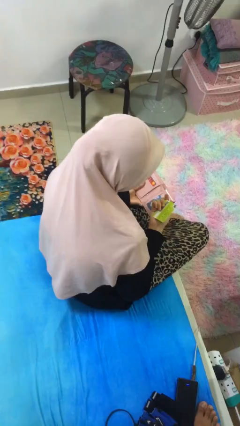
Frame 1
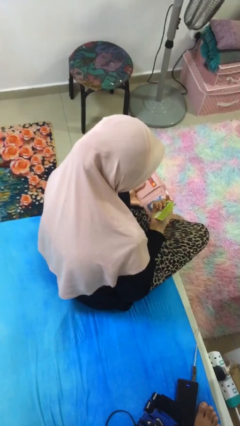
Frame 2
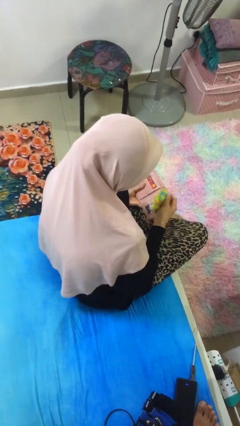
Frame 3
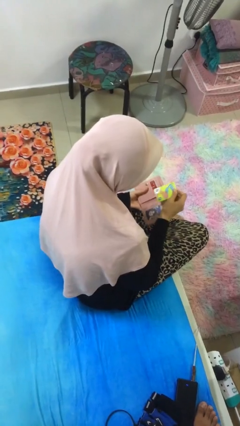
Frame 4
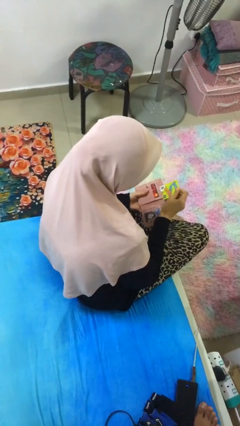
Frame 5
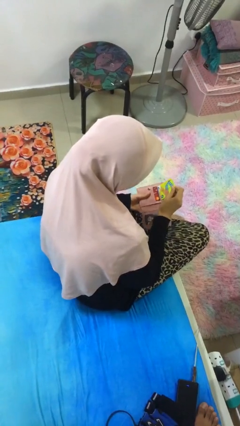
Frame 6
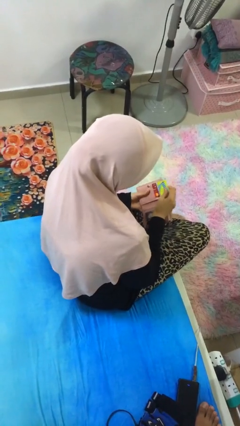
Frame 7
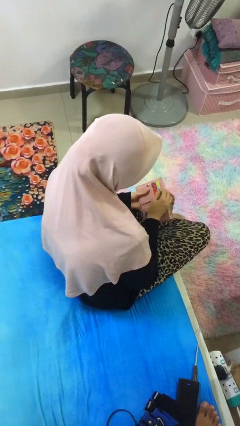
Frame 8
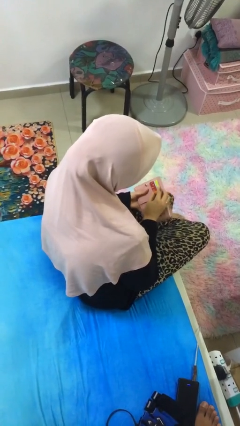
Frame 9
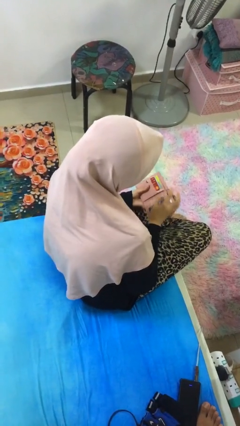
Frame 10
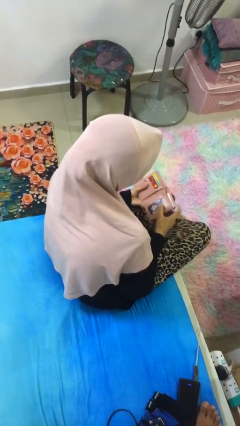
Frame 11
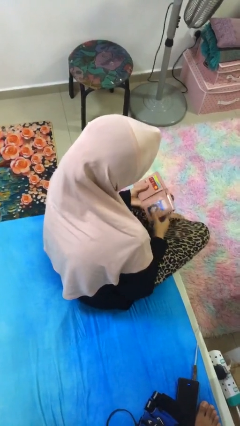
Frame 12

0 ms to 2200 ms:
person puts object into purse

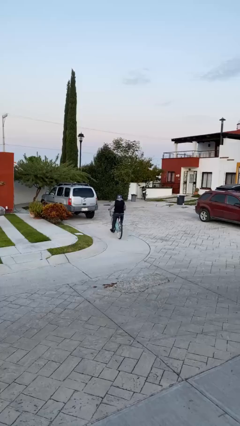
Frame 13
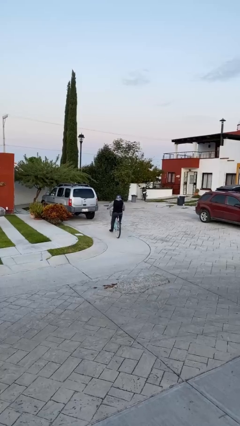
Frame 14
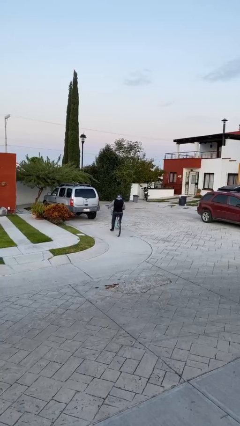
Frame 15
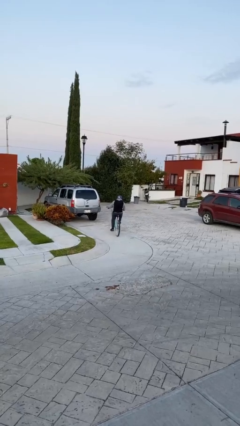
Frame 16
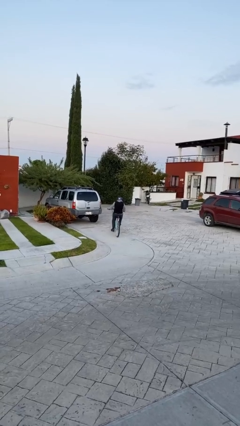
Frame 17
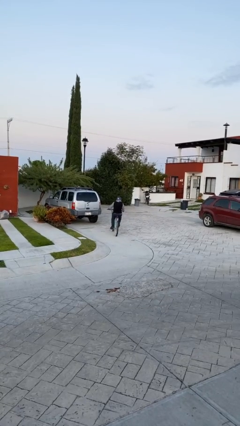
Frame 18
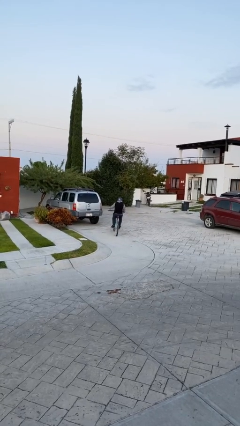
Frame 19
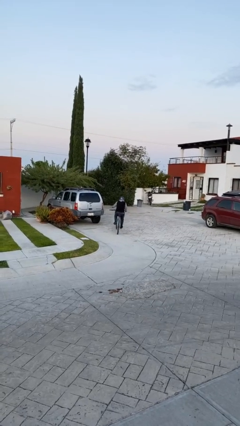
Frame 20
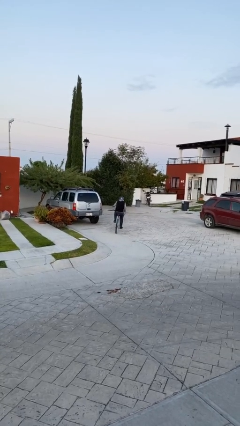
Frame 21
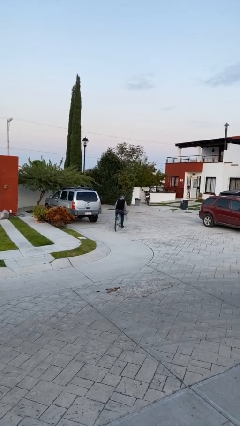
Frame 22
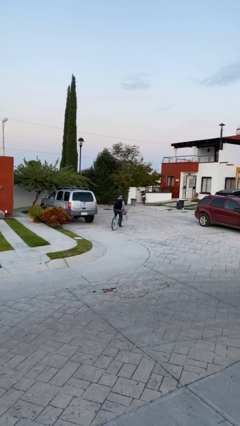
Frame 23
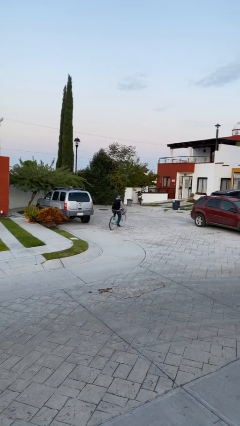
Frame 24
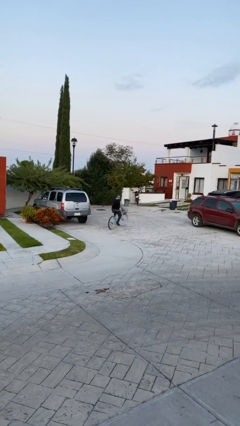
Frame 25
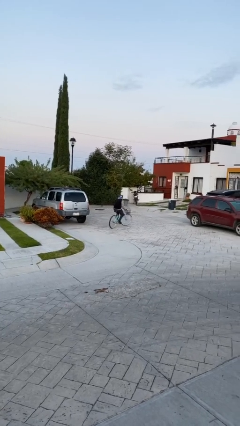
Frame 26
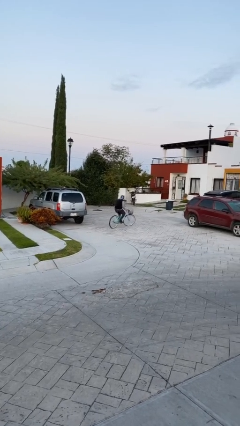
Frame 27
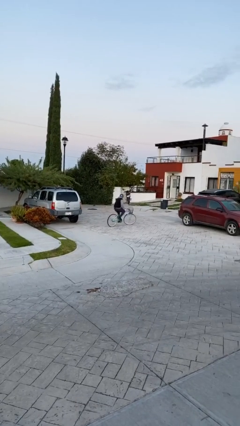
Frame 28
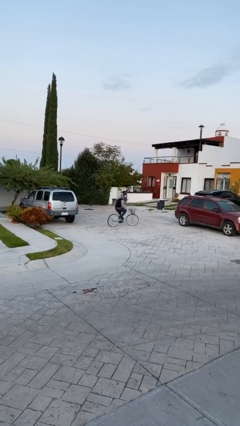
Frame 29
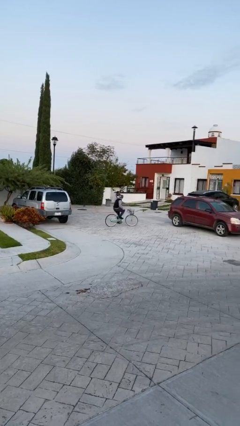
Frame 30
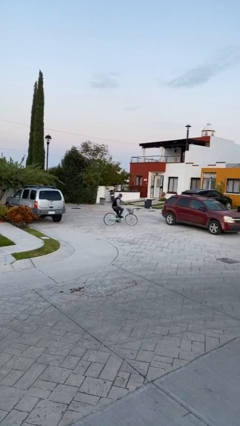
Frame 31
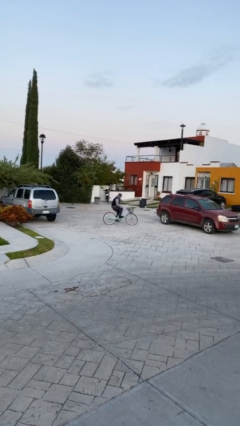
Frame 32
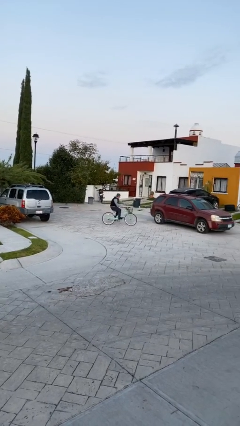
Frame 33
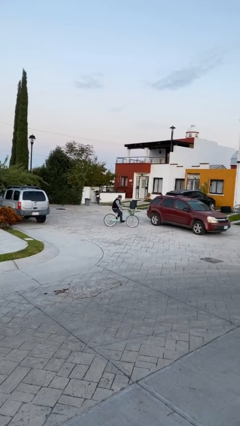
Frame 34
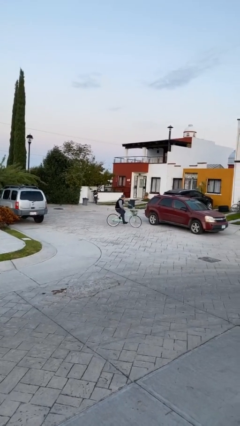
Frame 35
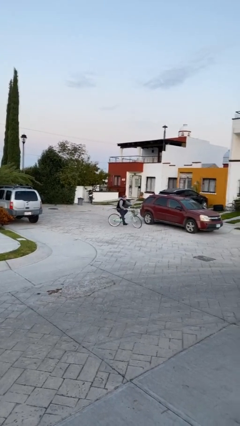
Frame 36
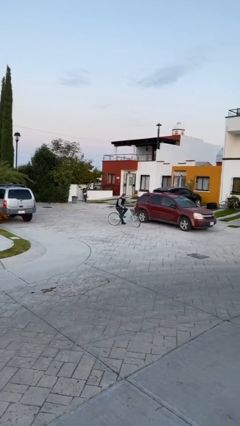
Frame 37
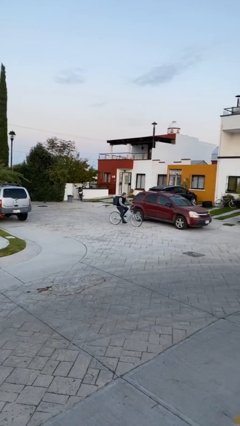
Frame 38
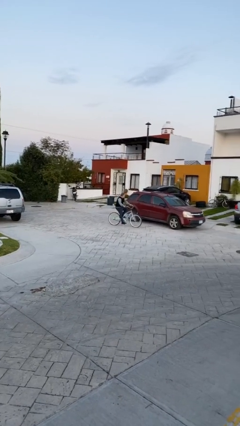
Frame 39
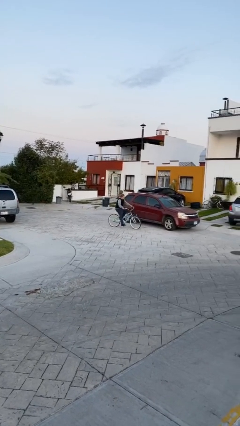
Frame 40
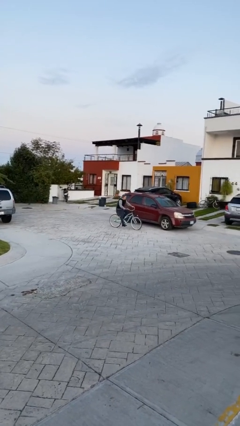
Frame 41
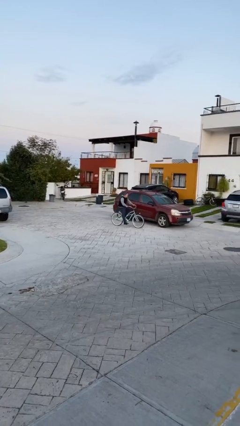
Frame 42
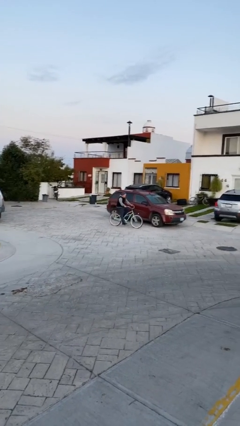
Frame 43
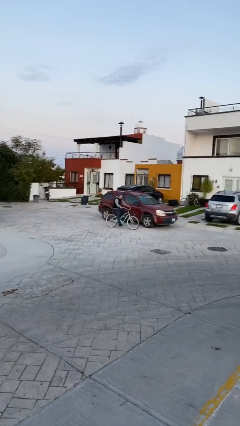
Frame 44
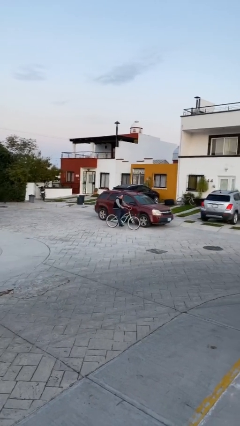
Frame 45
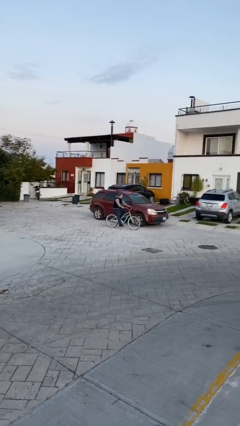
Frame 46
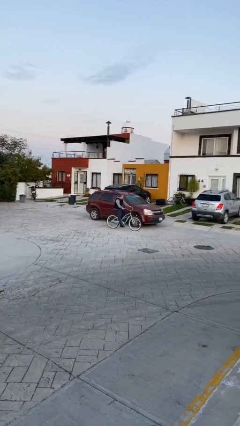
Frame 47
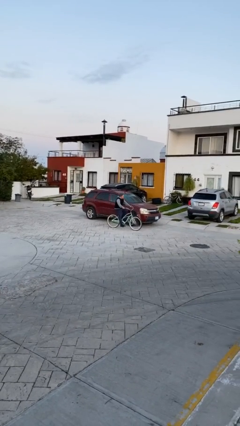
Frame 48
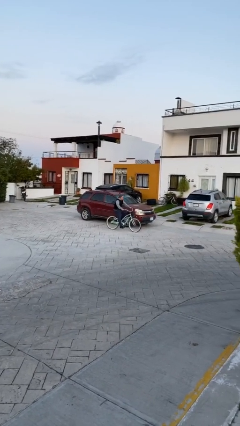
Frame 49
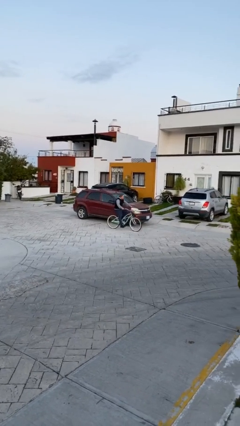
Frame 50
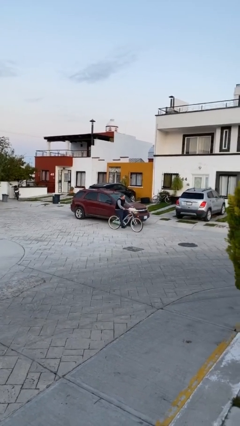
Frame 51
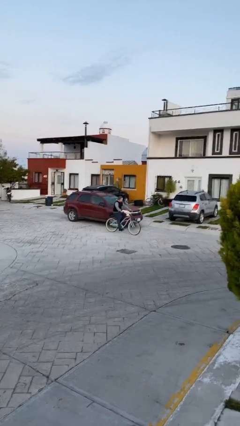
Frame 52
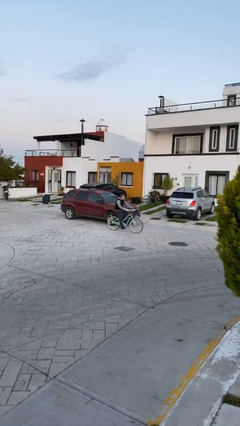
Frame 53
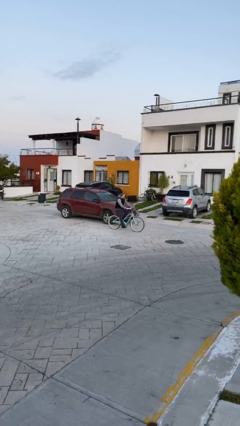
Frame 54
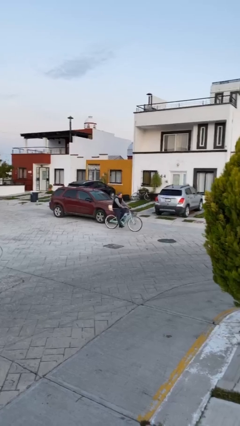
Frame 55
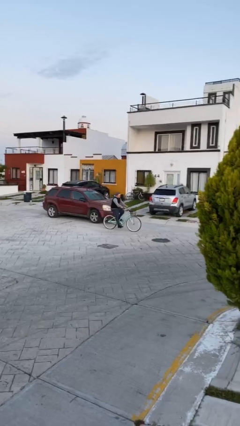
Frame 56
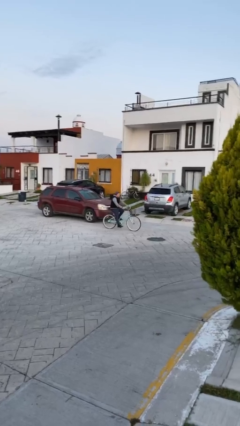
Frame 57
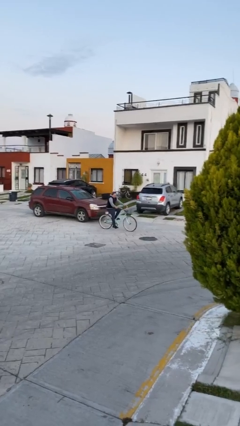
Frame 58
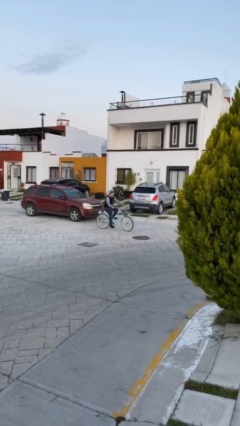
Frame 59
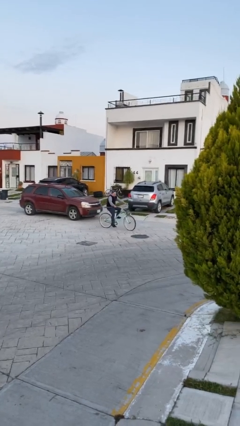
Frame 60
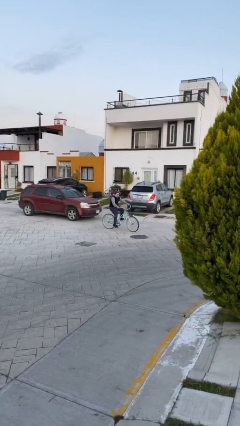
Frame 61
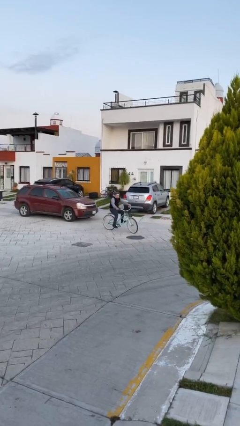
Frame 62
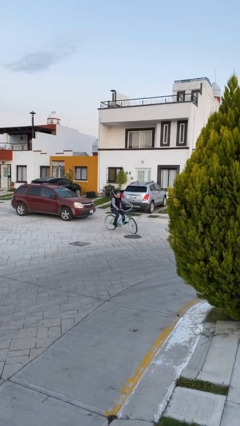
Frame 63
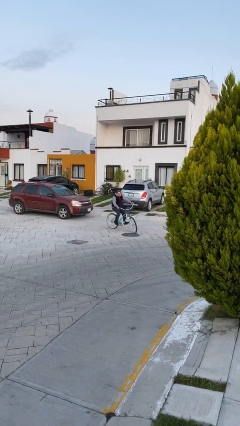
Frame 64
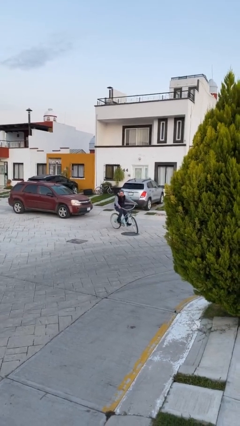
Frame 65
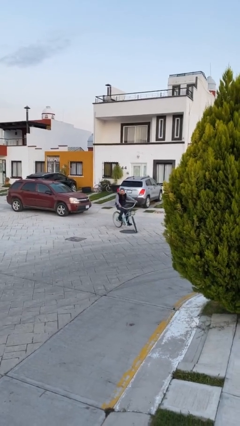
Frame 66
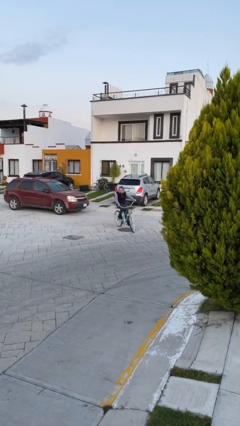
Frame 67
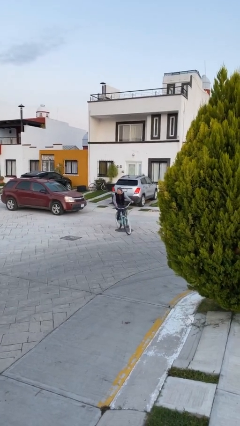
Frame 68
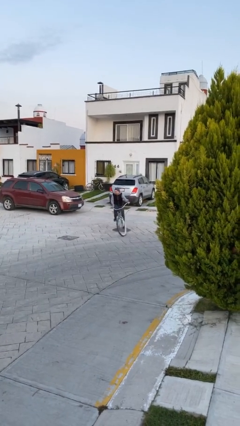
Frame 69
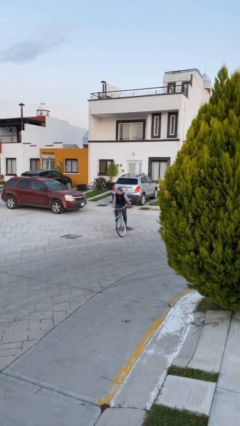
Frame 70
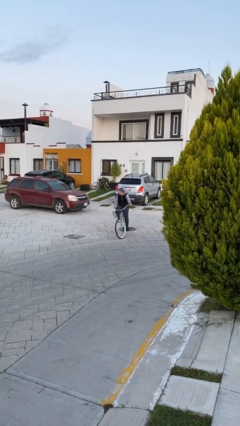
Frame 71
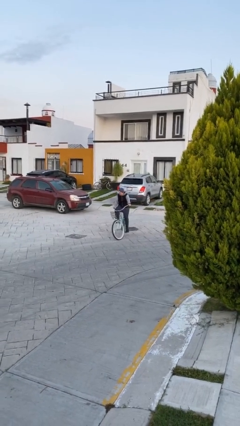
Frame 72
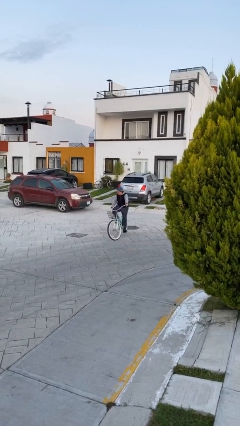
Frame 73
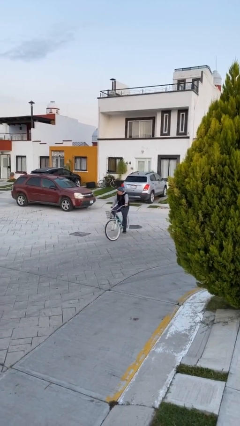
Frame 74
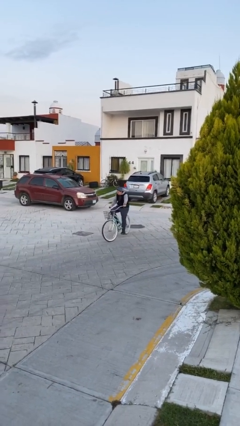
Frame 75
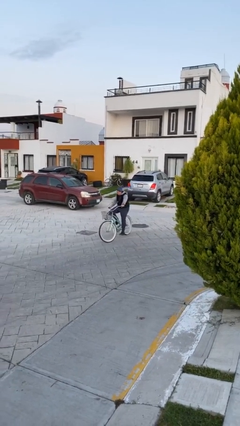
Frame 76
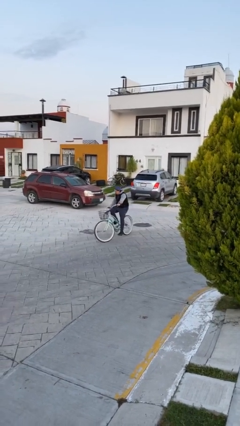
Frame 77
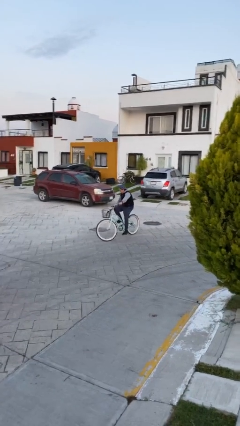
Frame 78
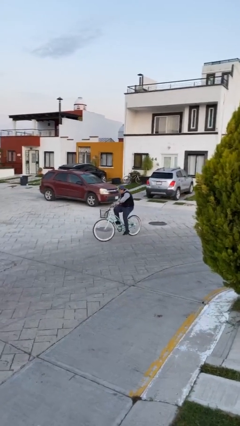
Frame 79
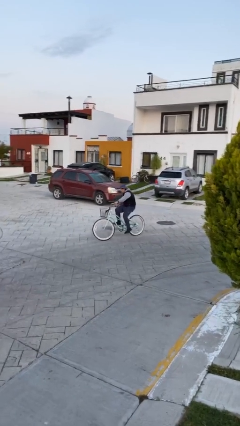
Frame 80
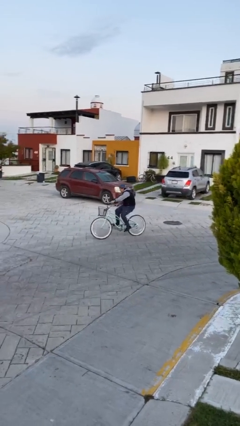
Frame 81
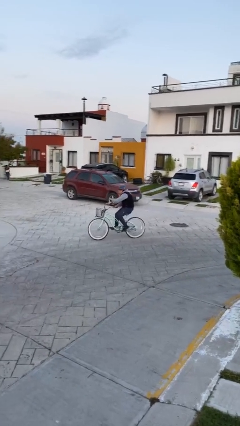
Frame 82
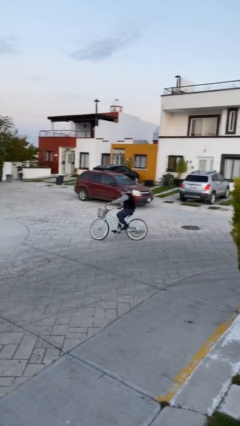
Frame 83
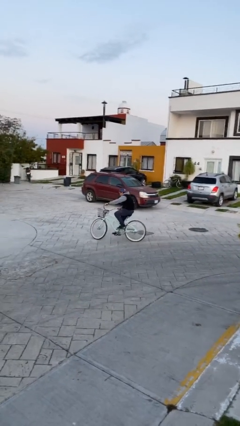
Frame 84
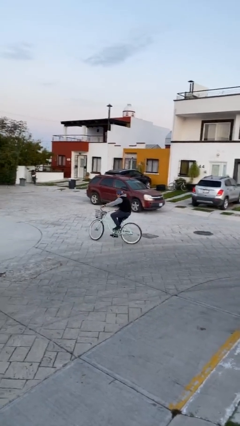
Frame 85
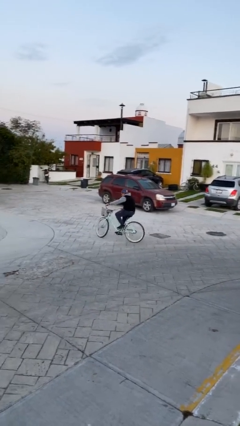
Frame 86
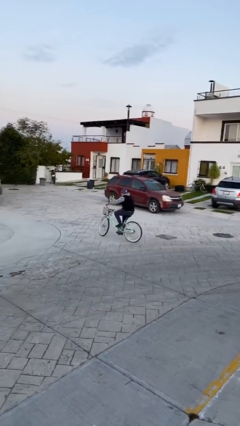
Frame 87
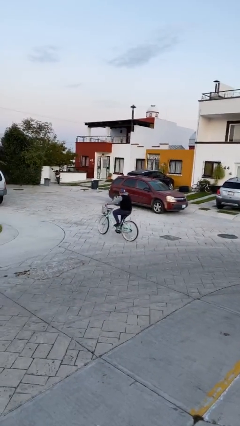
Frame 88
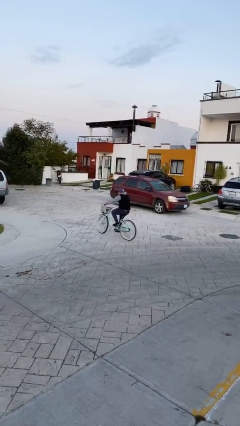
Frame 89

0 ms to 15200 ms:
person rides bicycle

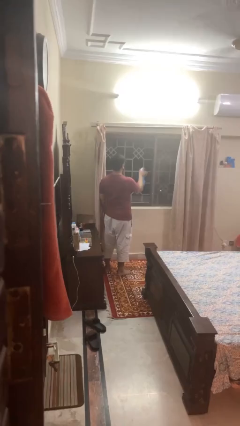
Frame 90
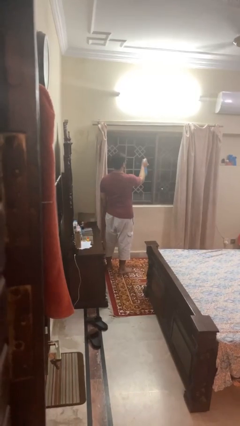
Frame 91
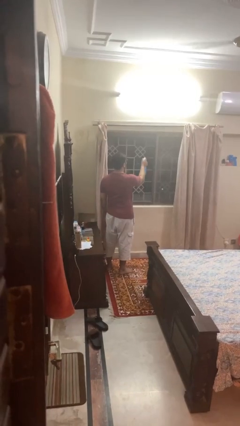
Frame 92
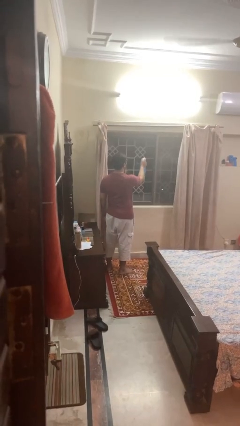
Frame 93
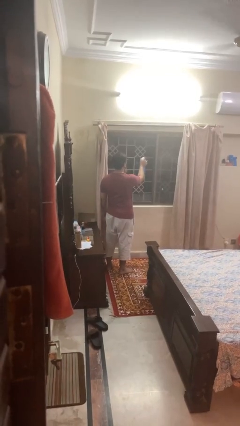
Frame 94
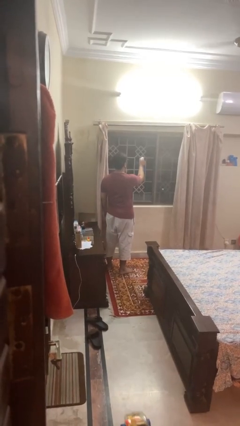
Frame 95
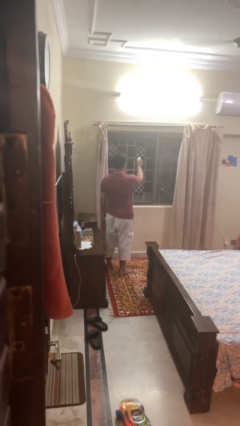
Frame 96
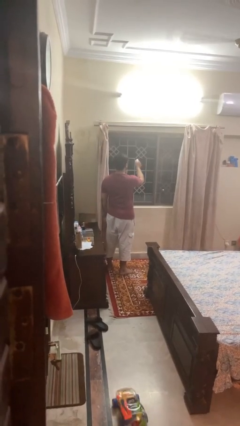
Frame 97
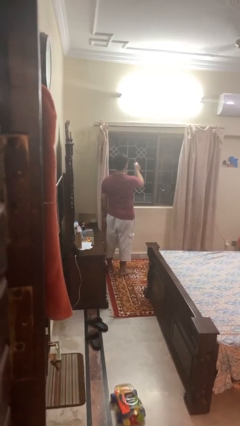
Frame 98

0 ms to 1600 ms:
person sprays from bottle
